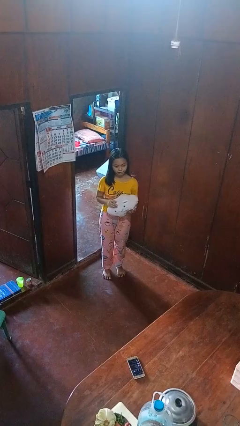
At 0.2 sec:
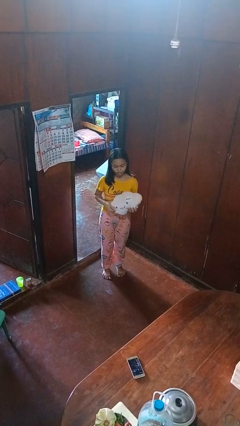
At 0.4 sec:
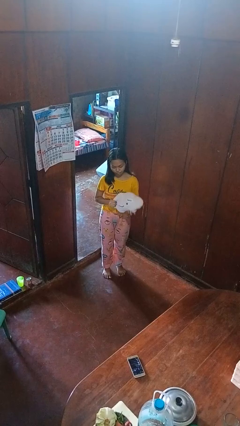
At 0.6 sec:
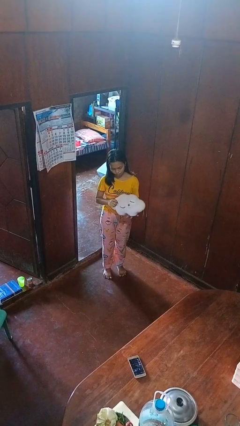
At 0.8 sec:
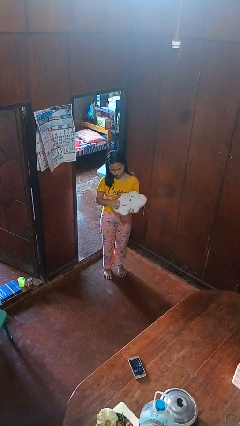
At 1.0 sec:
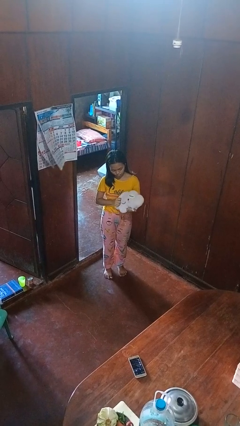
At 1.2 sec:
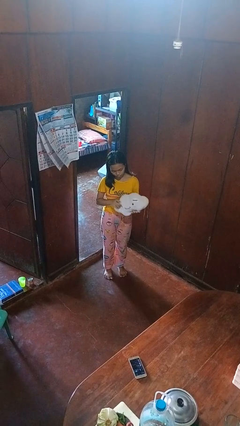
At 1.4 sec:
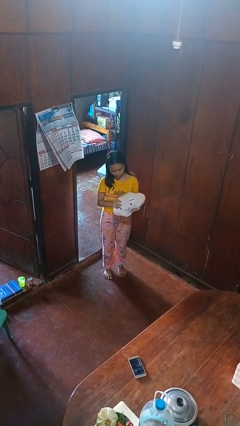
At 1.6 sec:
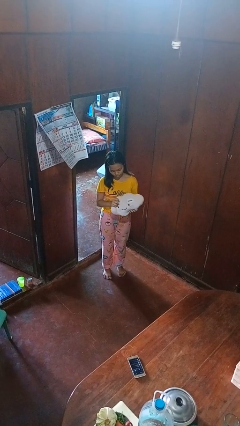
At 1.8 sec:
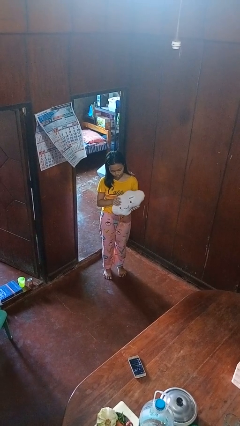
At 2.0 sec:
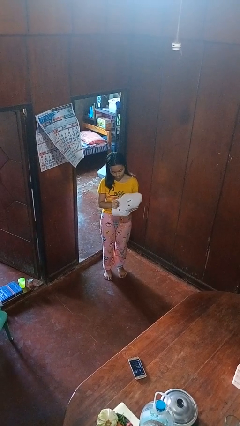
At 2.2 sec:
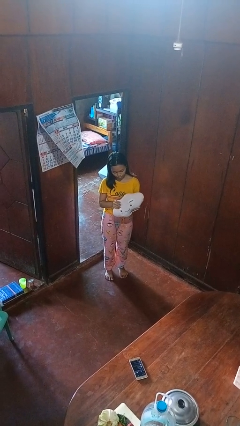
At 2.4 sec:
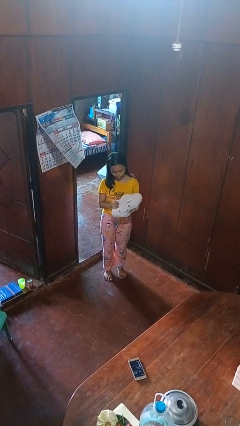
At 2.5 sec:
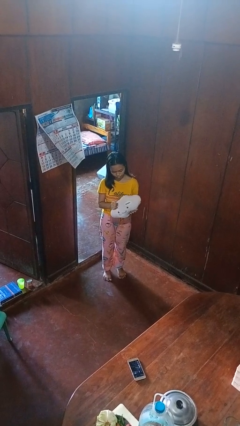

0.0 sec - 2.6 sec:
person squeezes object

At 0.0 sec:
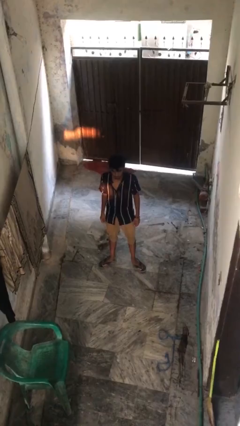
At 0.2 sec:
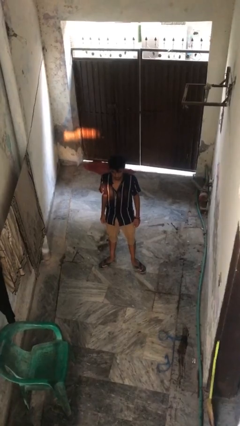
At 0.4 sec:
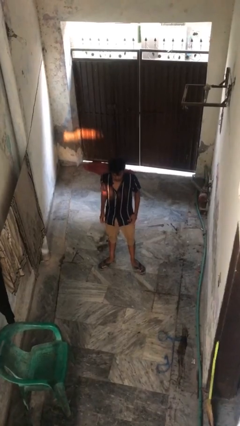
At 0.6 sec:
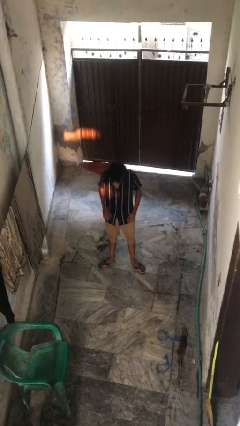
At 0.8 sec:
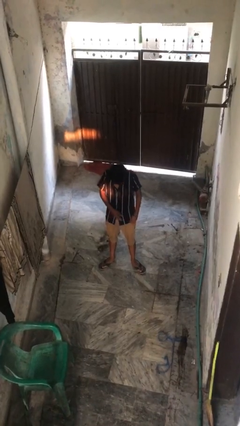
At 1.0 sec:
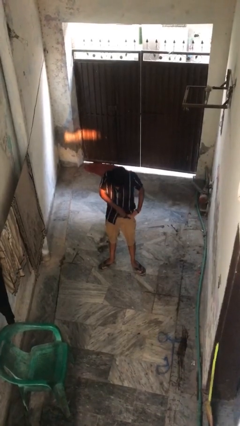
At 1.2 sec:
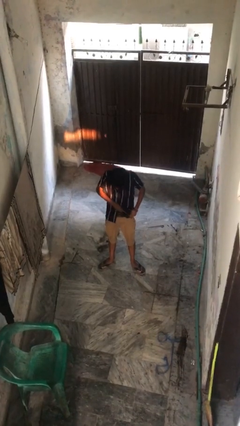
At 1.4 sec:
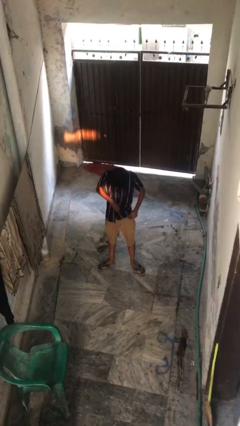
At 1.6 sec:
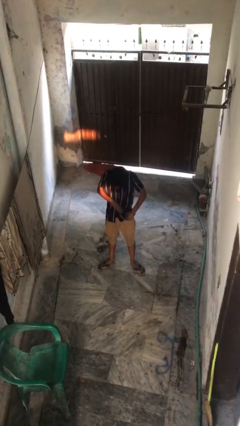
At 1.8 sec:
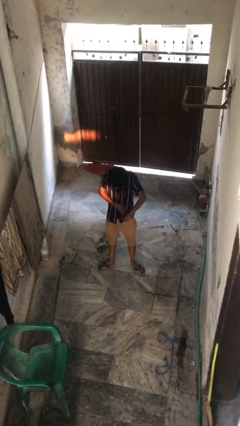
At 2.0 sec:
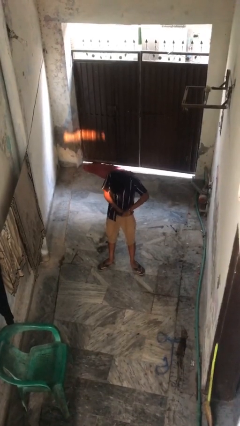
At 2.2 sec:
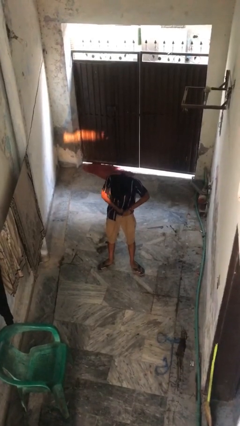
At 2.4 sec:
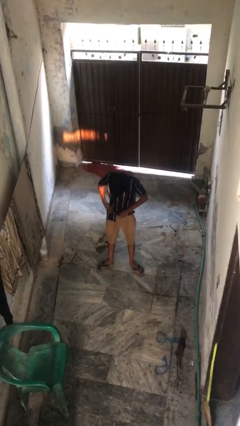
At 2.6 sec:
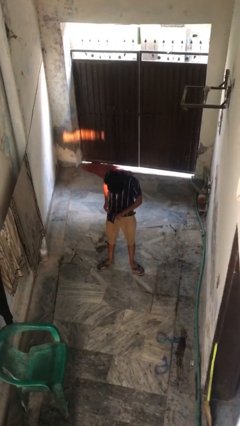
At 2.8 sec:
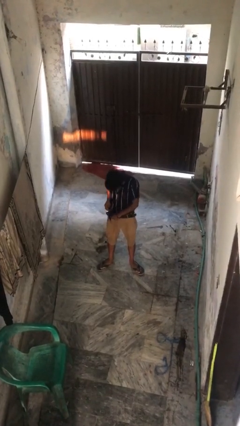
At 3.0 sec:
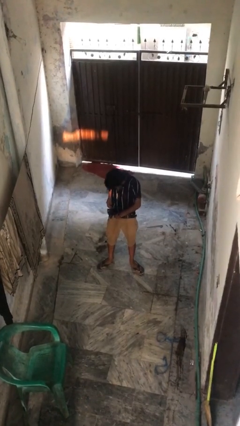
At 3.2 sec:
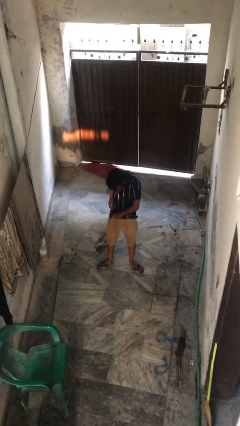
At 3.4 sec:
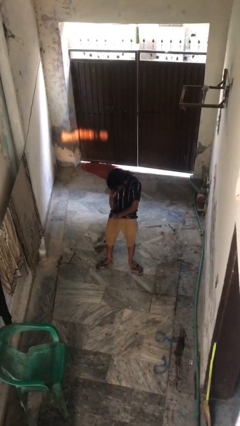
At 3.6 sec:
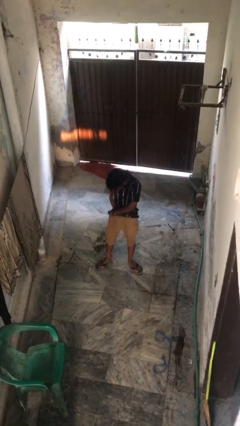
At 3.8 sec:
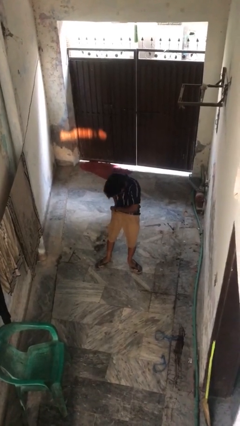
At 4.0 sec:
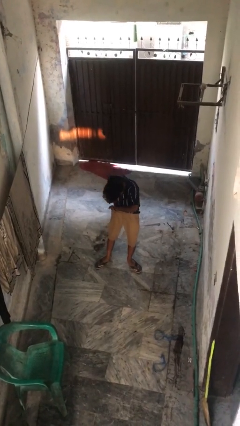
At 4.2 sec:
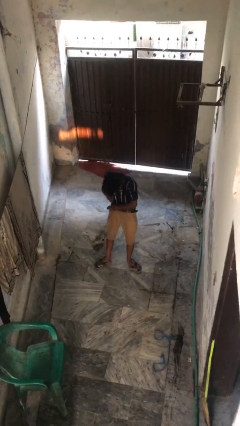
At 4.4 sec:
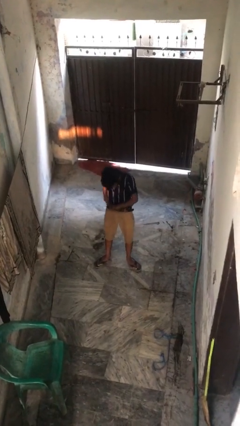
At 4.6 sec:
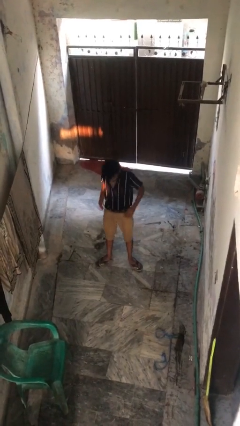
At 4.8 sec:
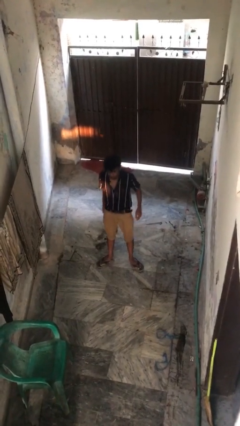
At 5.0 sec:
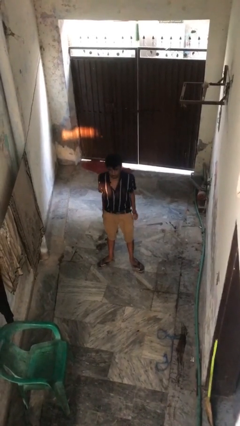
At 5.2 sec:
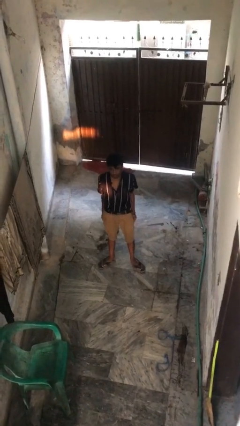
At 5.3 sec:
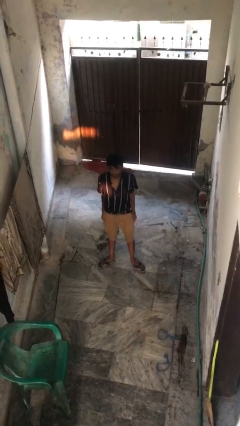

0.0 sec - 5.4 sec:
person tucks in shirt

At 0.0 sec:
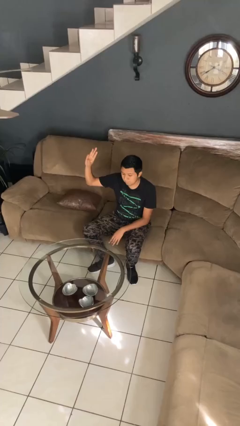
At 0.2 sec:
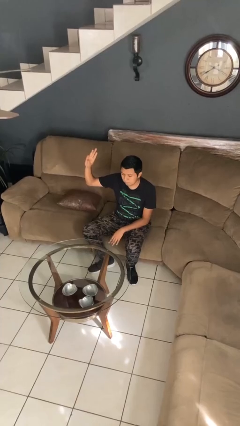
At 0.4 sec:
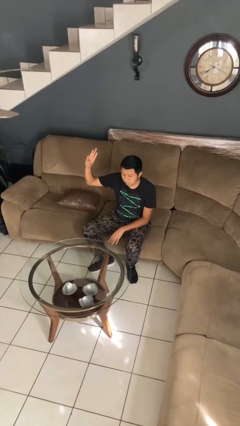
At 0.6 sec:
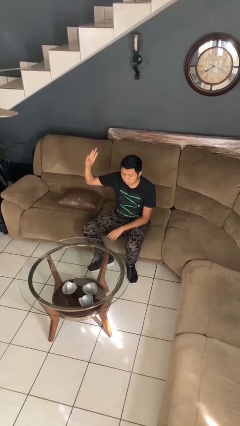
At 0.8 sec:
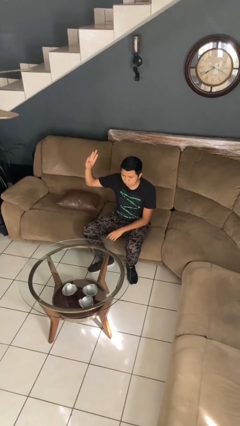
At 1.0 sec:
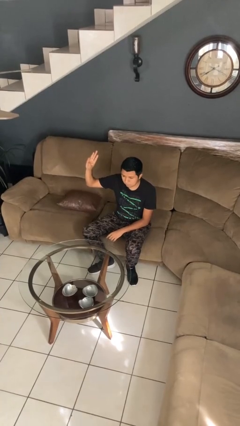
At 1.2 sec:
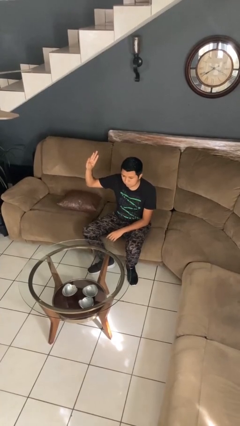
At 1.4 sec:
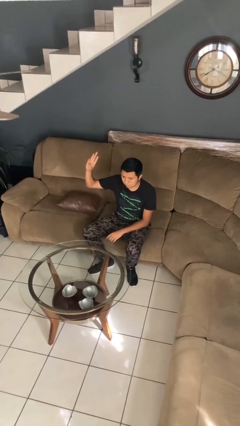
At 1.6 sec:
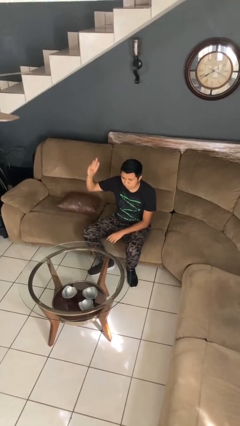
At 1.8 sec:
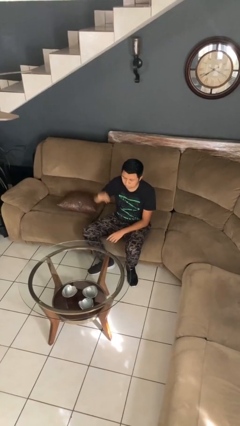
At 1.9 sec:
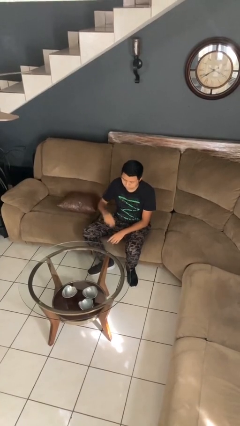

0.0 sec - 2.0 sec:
person gestures number three

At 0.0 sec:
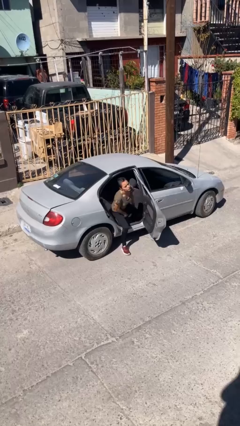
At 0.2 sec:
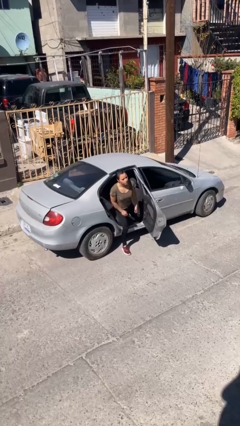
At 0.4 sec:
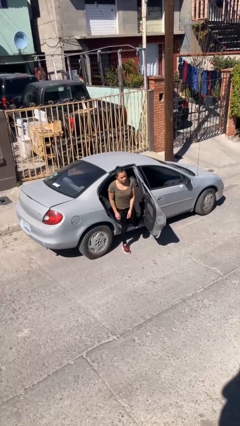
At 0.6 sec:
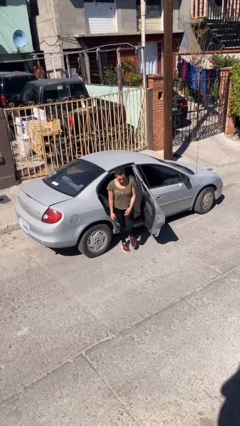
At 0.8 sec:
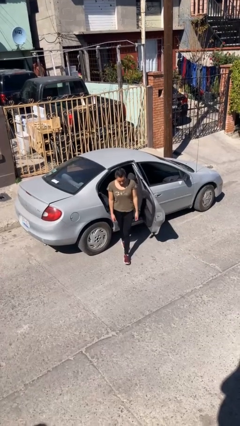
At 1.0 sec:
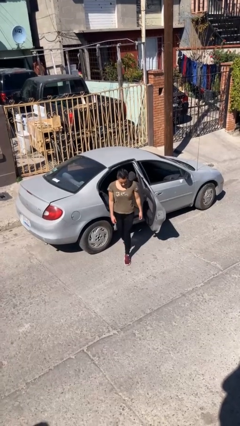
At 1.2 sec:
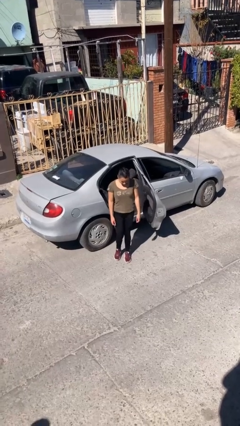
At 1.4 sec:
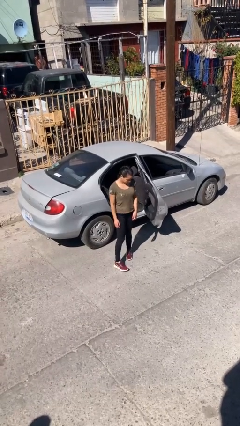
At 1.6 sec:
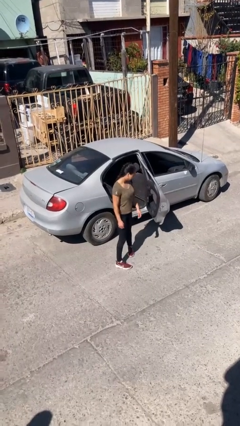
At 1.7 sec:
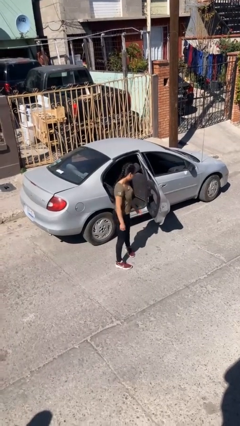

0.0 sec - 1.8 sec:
person exits car

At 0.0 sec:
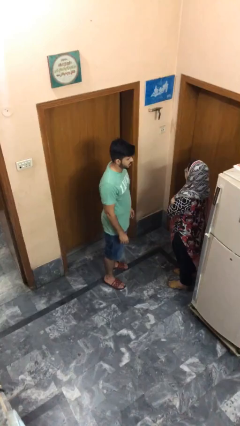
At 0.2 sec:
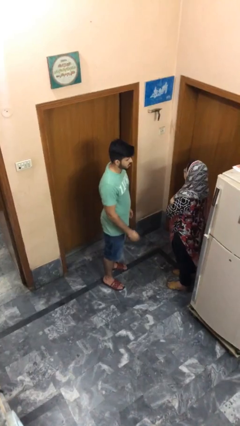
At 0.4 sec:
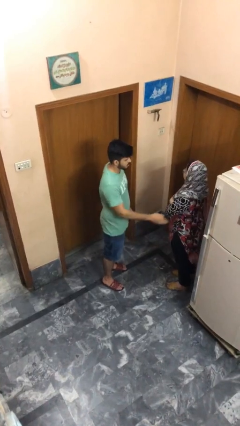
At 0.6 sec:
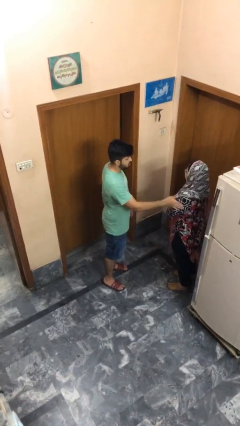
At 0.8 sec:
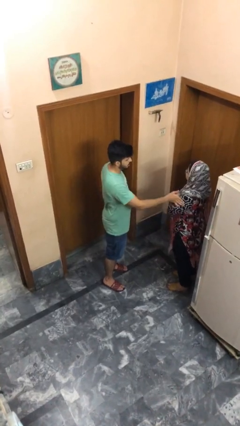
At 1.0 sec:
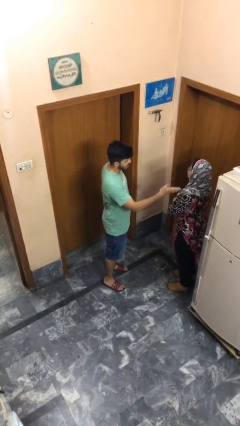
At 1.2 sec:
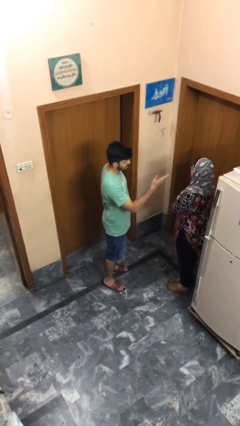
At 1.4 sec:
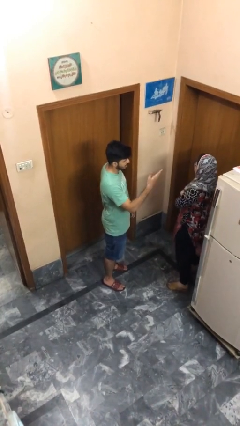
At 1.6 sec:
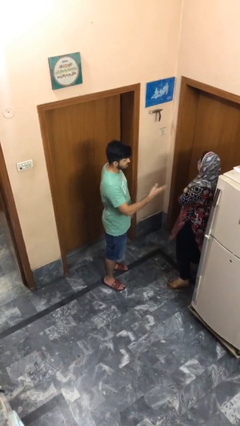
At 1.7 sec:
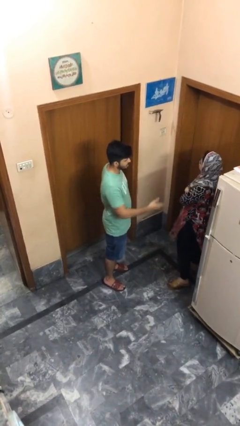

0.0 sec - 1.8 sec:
person shoves person

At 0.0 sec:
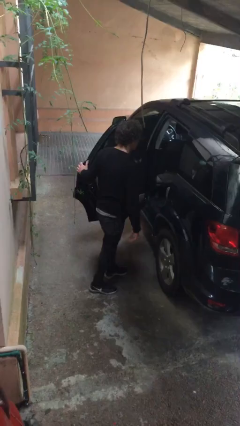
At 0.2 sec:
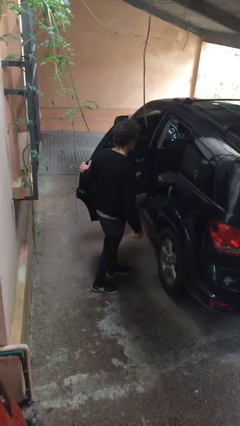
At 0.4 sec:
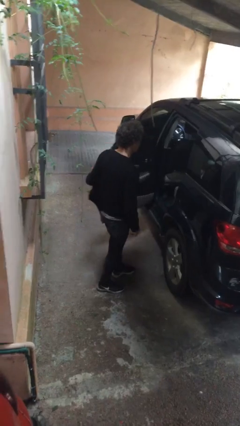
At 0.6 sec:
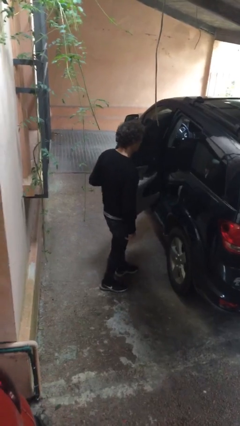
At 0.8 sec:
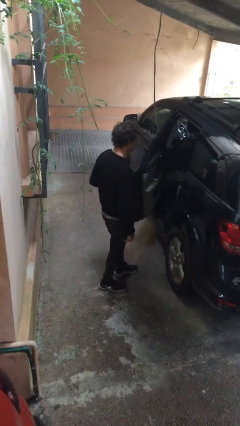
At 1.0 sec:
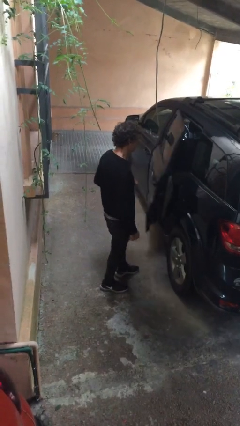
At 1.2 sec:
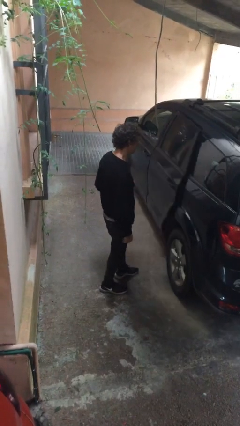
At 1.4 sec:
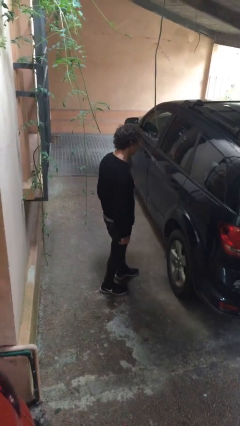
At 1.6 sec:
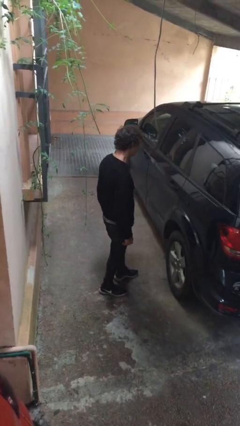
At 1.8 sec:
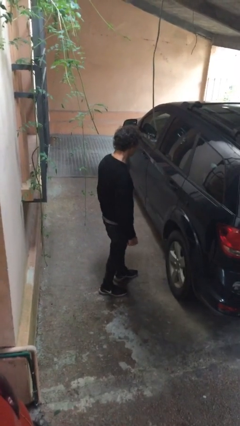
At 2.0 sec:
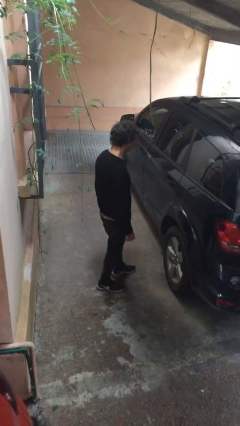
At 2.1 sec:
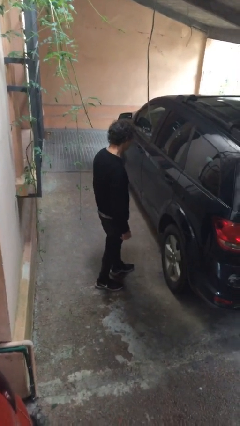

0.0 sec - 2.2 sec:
person closes car door

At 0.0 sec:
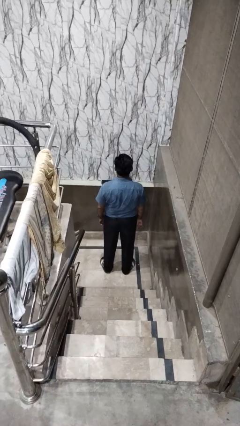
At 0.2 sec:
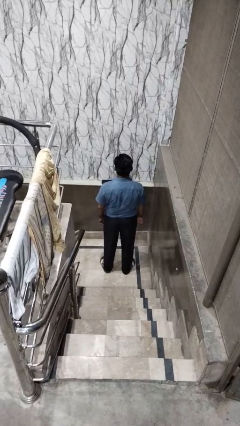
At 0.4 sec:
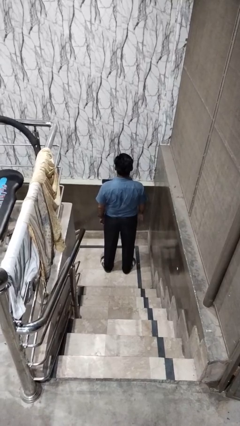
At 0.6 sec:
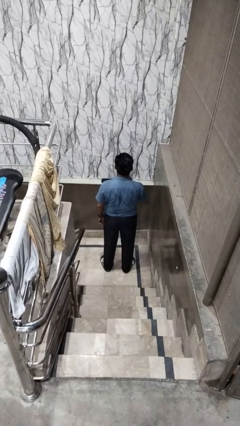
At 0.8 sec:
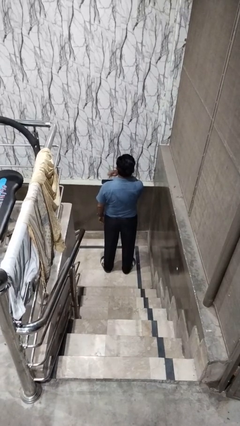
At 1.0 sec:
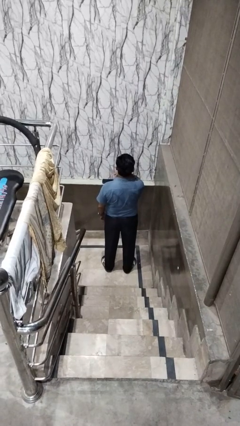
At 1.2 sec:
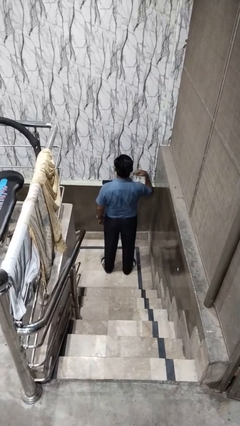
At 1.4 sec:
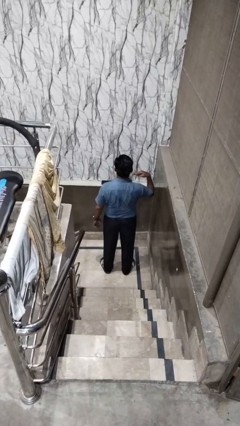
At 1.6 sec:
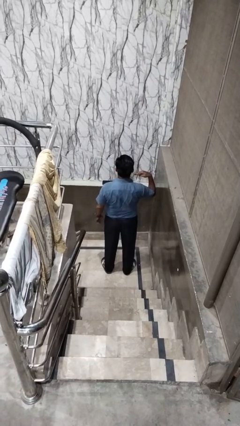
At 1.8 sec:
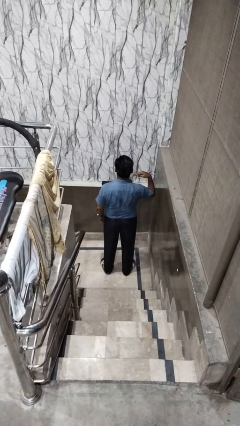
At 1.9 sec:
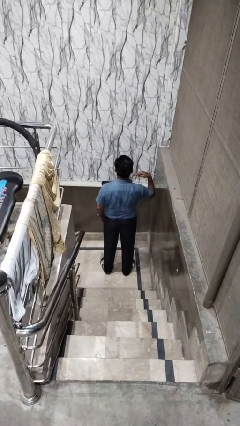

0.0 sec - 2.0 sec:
person gestures cut
